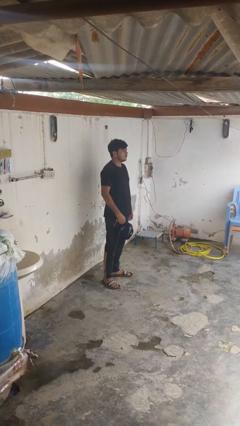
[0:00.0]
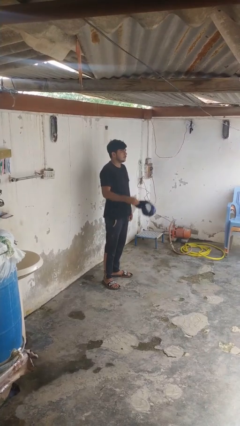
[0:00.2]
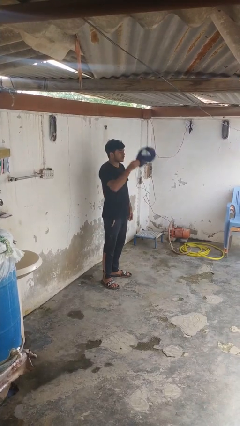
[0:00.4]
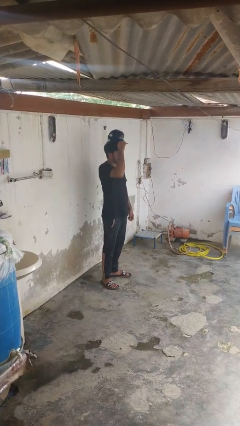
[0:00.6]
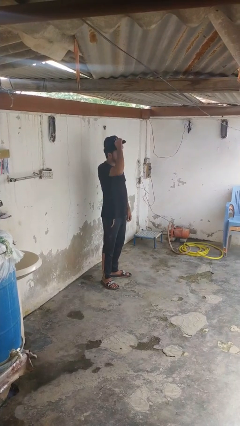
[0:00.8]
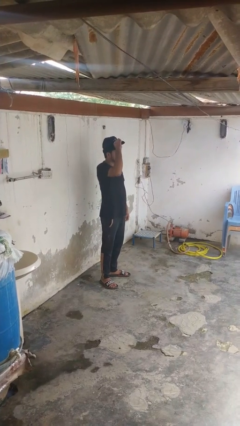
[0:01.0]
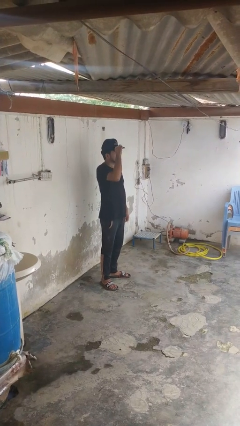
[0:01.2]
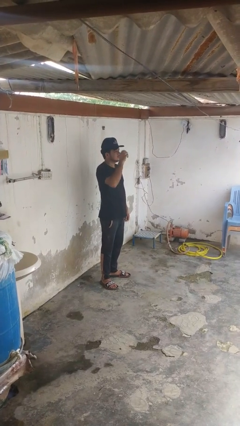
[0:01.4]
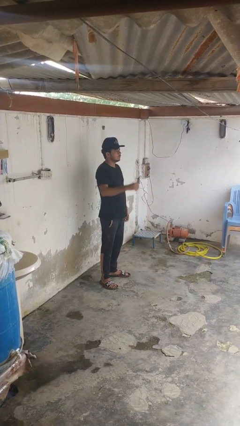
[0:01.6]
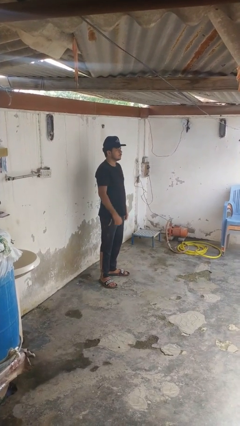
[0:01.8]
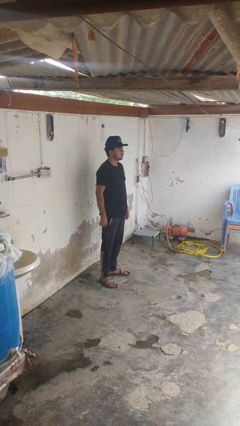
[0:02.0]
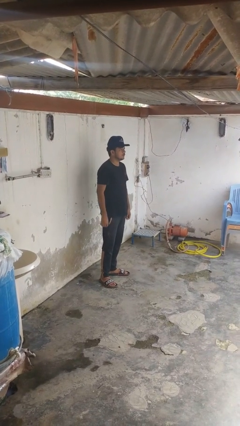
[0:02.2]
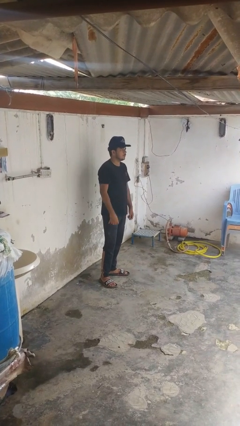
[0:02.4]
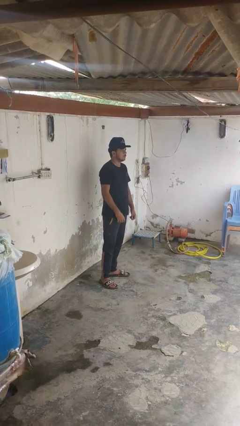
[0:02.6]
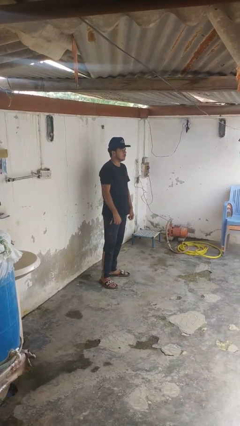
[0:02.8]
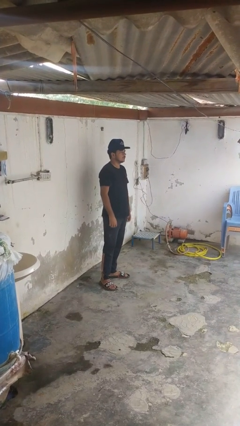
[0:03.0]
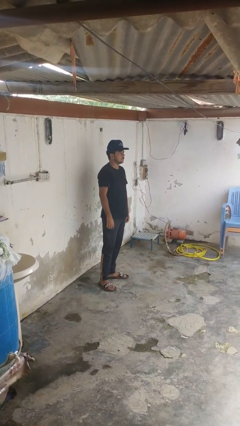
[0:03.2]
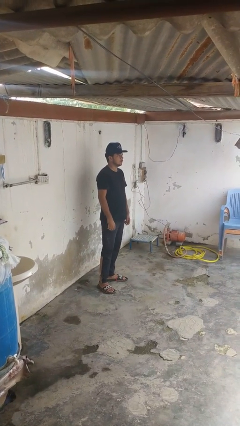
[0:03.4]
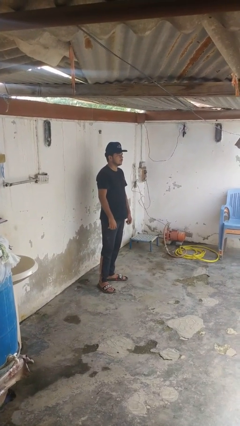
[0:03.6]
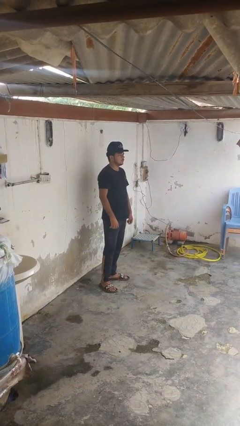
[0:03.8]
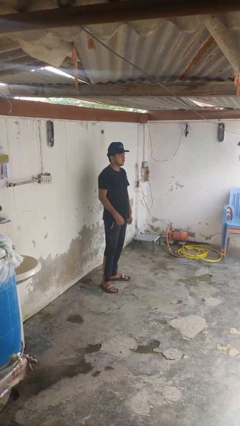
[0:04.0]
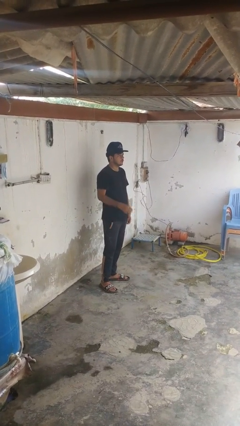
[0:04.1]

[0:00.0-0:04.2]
person puts on hat

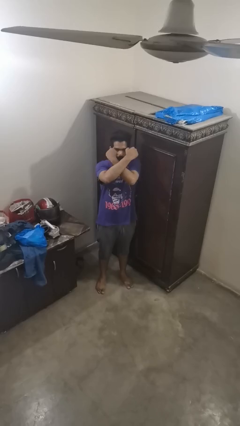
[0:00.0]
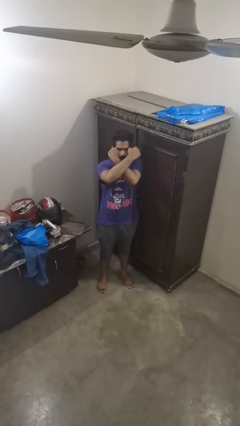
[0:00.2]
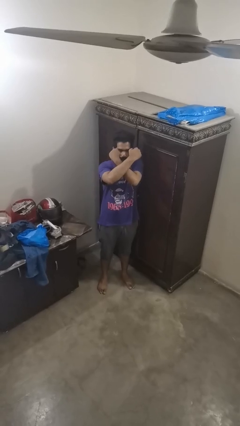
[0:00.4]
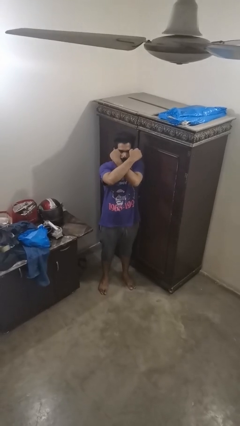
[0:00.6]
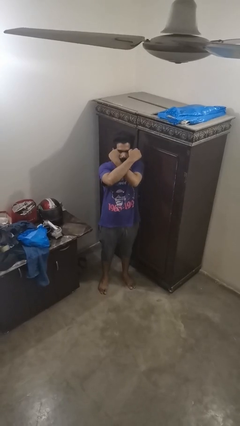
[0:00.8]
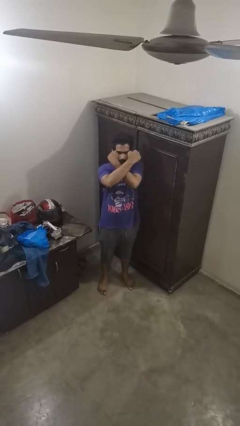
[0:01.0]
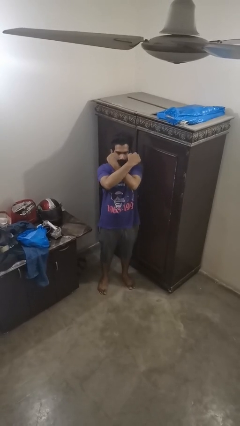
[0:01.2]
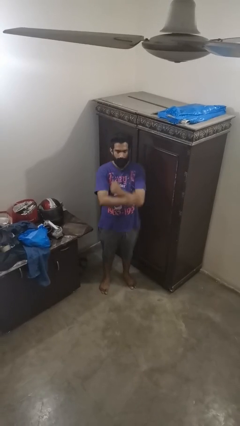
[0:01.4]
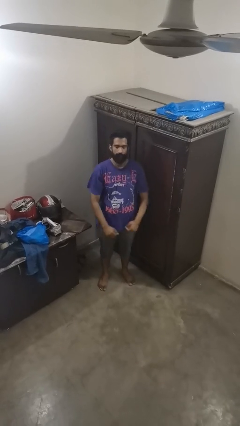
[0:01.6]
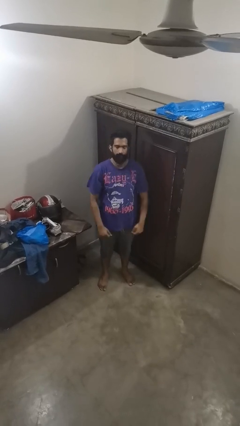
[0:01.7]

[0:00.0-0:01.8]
person gestures arms x

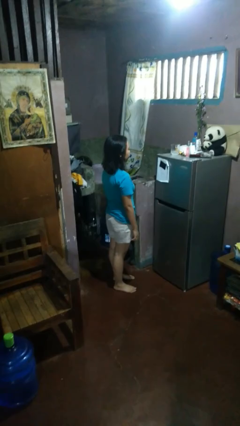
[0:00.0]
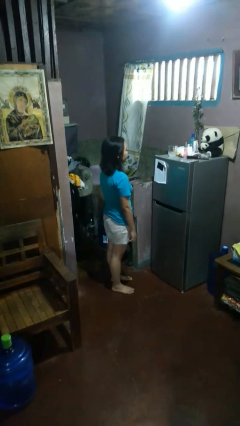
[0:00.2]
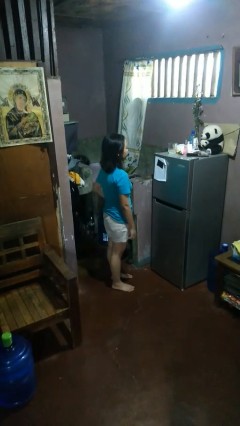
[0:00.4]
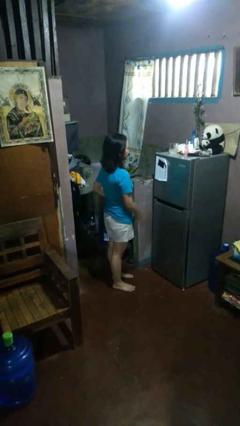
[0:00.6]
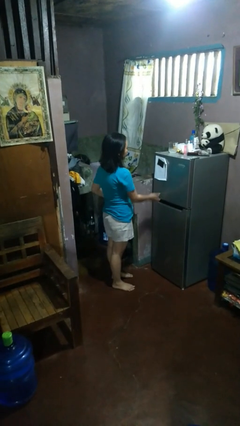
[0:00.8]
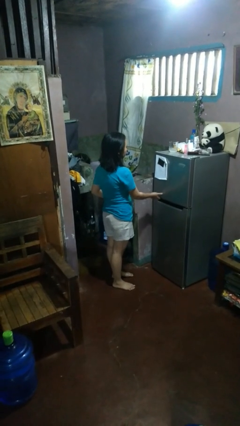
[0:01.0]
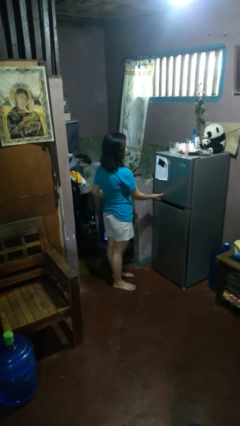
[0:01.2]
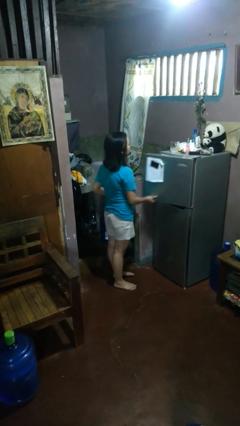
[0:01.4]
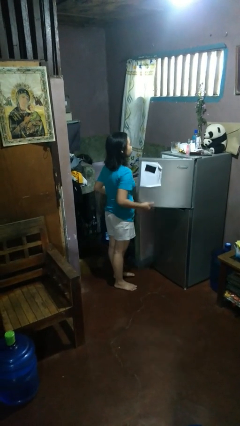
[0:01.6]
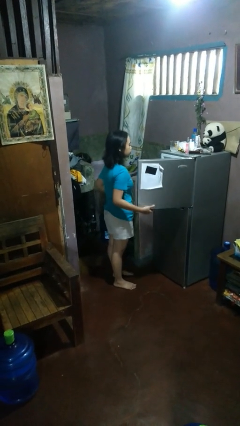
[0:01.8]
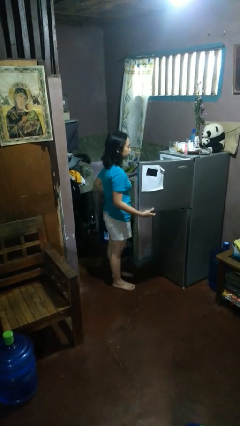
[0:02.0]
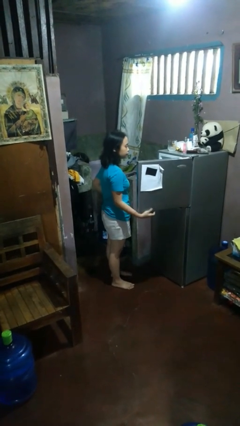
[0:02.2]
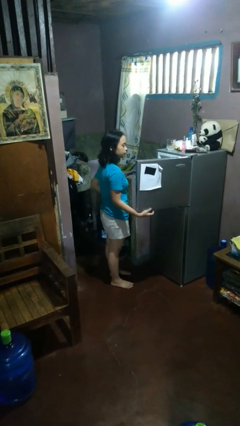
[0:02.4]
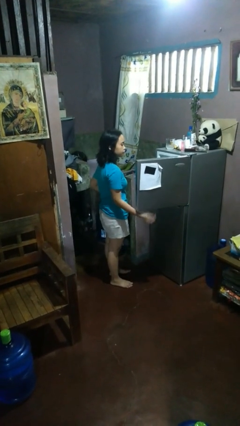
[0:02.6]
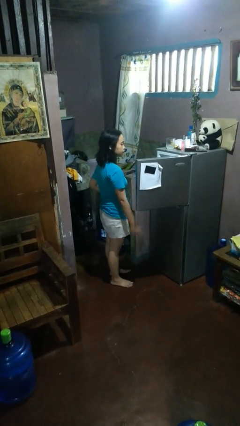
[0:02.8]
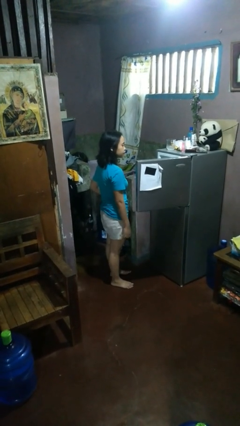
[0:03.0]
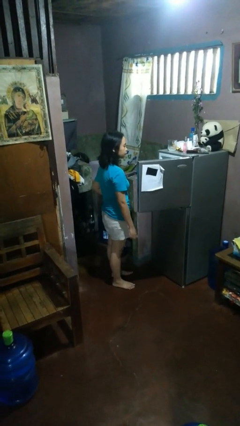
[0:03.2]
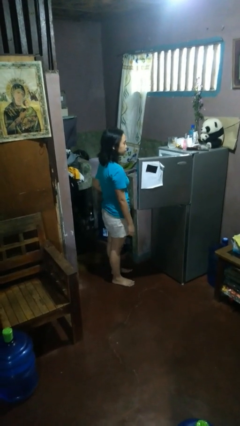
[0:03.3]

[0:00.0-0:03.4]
person opens refrigerator

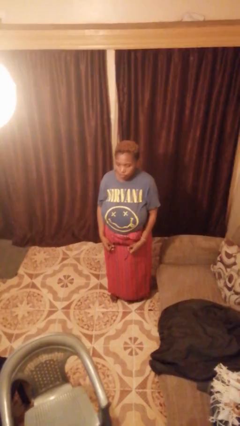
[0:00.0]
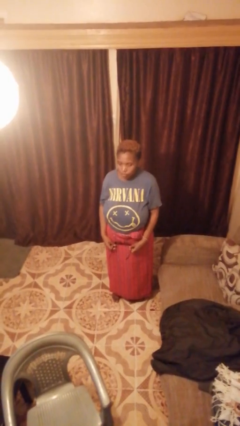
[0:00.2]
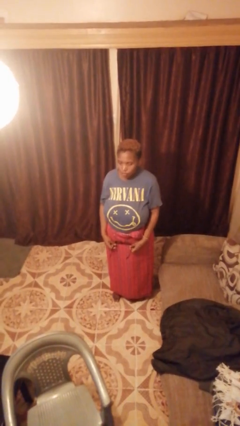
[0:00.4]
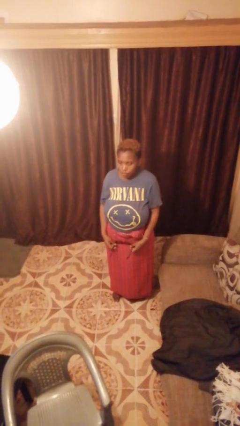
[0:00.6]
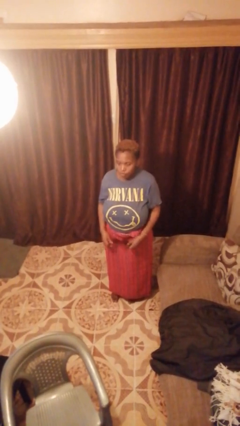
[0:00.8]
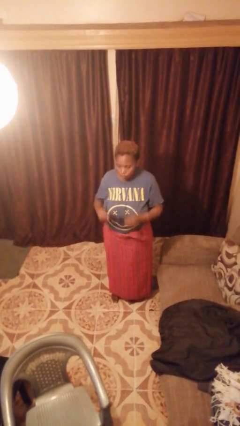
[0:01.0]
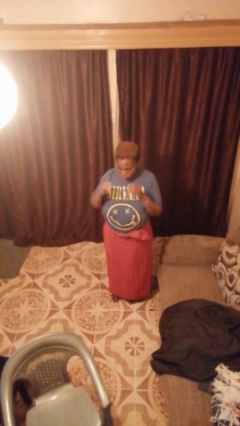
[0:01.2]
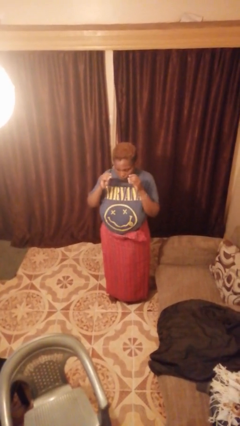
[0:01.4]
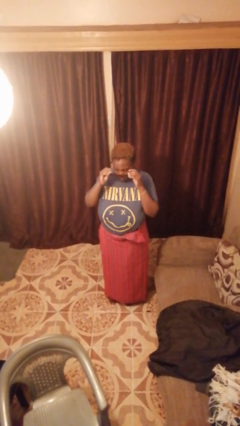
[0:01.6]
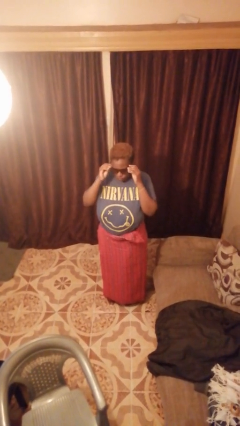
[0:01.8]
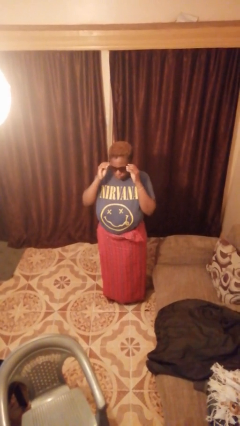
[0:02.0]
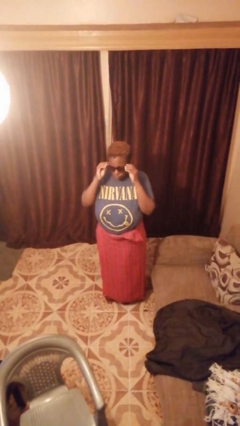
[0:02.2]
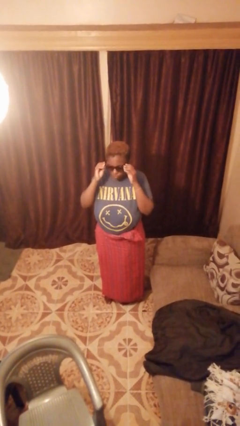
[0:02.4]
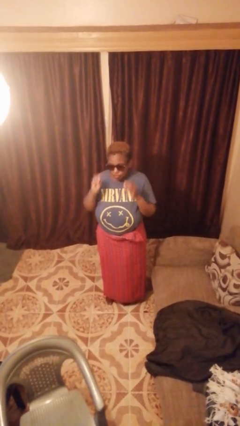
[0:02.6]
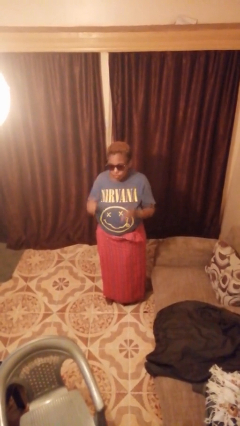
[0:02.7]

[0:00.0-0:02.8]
person puts on sunglasses

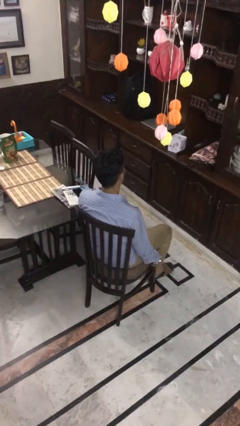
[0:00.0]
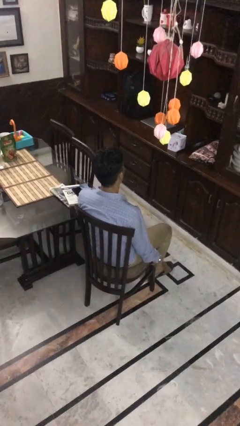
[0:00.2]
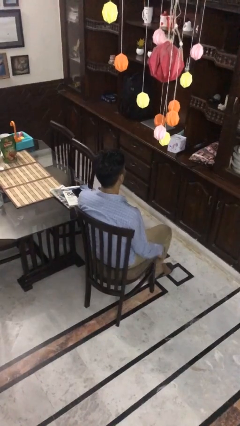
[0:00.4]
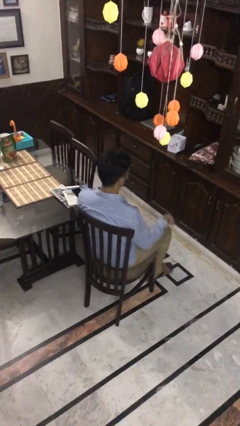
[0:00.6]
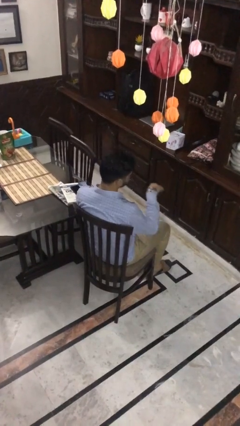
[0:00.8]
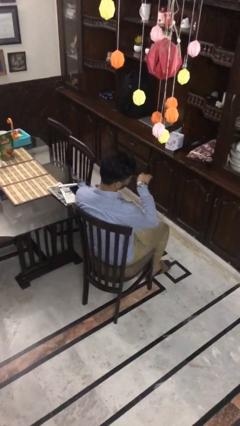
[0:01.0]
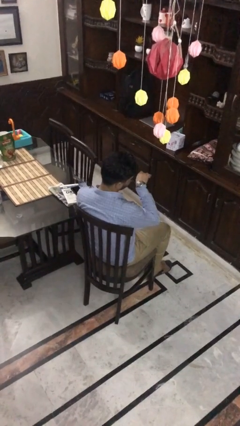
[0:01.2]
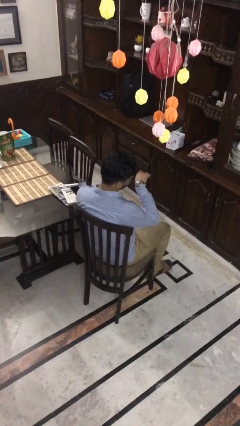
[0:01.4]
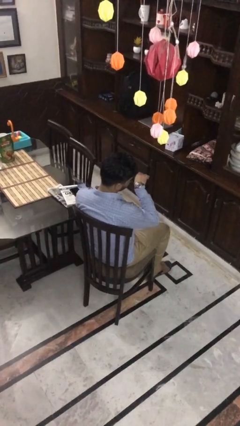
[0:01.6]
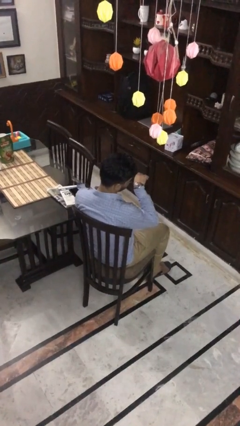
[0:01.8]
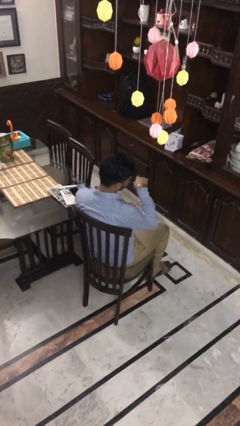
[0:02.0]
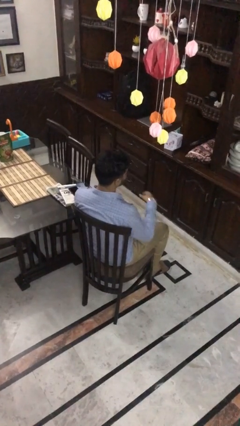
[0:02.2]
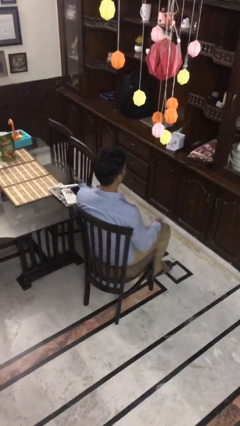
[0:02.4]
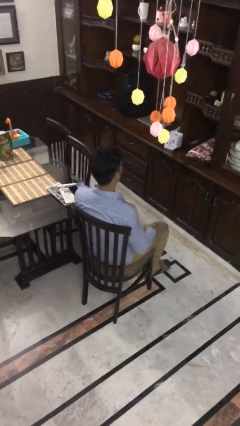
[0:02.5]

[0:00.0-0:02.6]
person looks at wristwatch

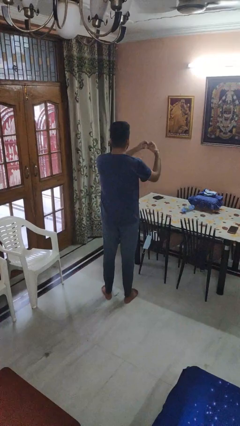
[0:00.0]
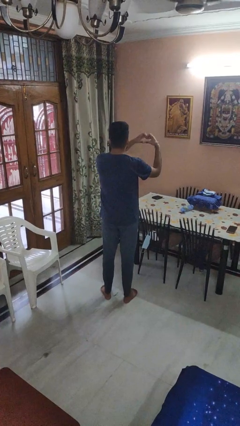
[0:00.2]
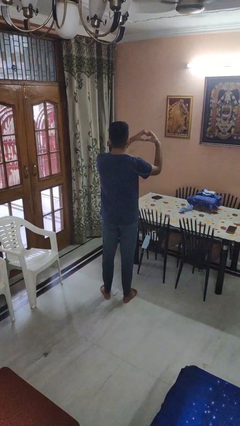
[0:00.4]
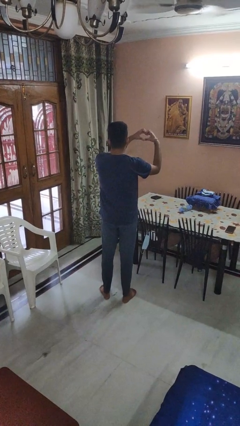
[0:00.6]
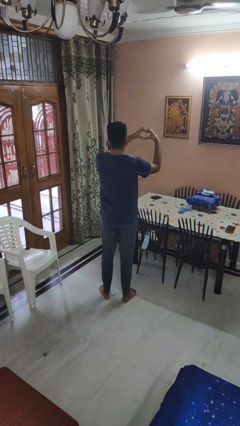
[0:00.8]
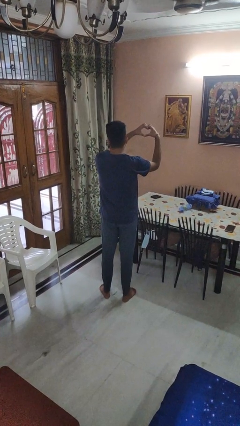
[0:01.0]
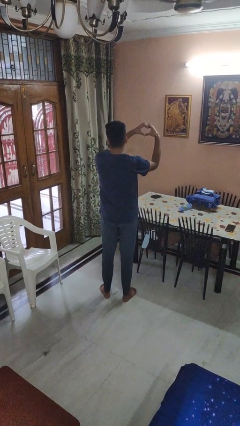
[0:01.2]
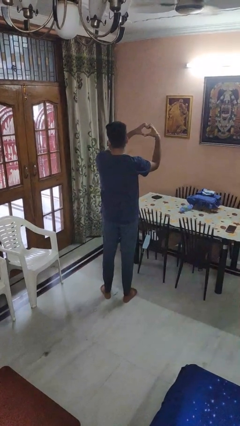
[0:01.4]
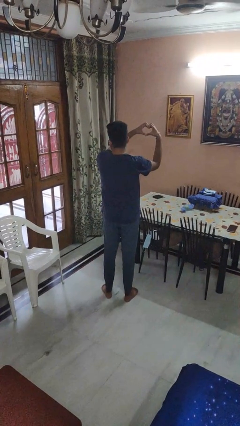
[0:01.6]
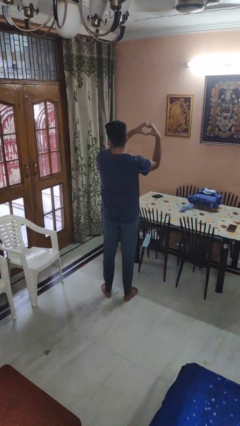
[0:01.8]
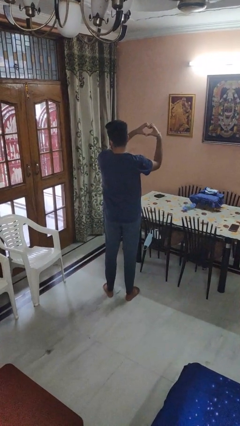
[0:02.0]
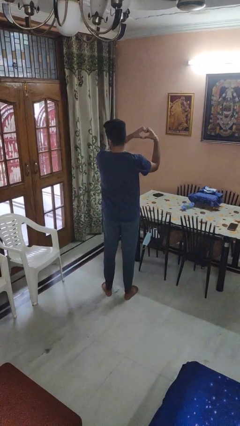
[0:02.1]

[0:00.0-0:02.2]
person gestures heart
